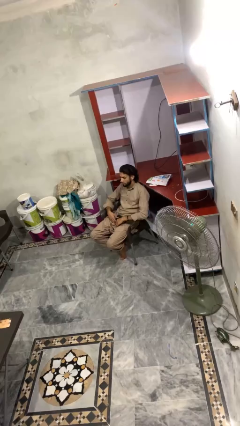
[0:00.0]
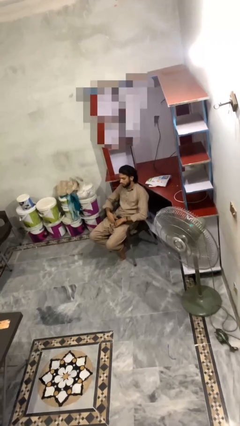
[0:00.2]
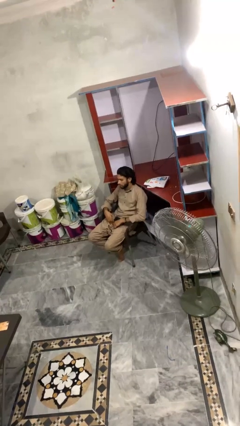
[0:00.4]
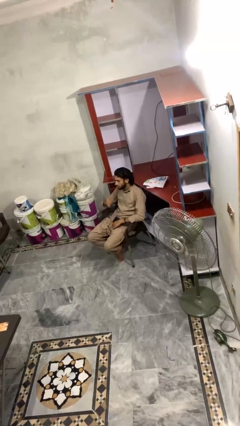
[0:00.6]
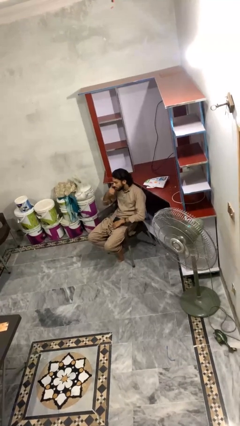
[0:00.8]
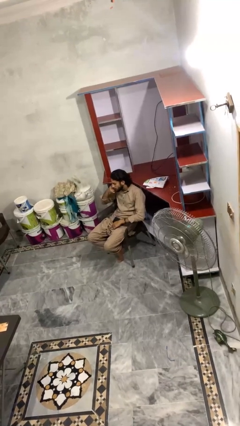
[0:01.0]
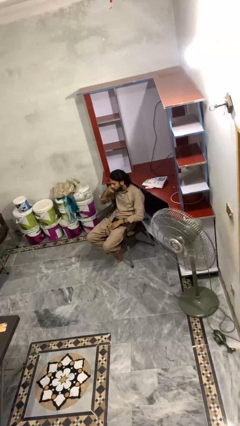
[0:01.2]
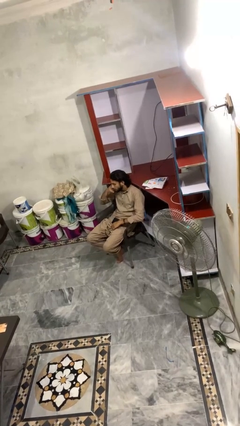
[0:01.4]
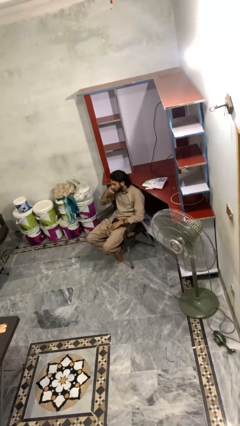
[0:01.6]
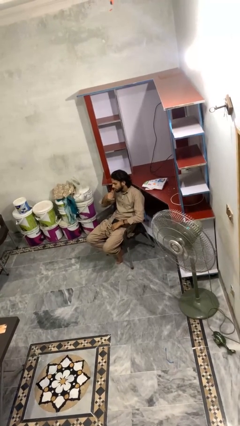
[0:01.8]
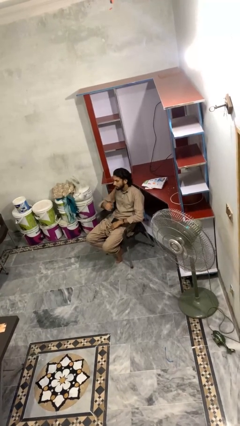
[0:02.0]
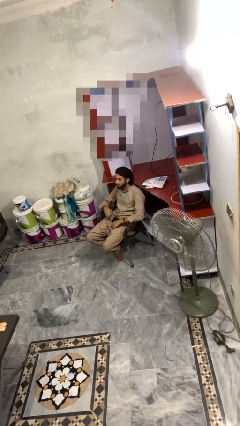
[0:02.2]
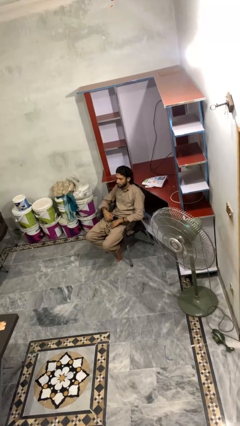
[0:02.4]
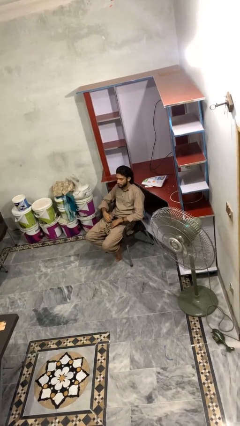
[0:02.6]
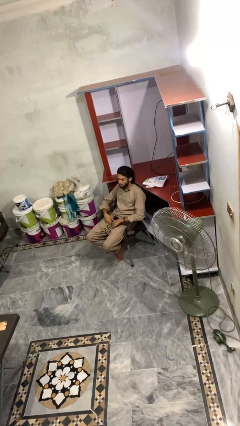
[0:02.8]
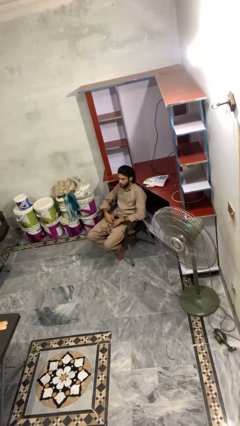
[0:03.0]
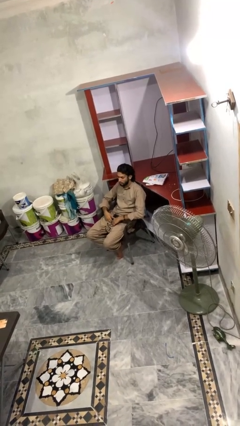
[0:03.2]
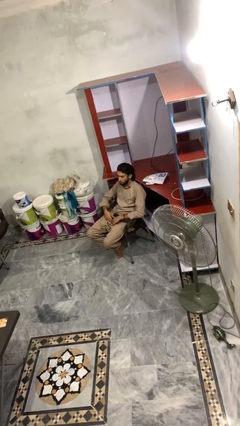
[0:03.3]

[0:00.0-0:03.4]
person gestures call me

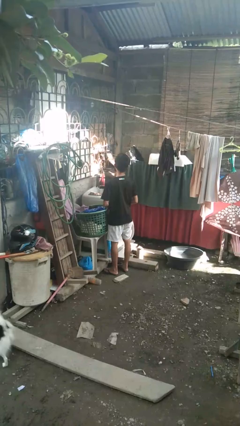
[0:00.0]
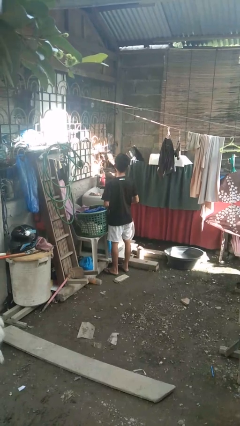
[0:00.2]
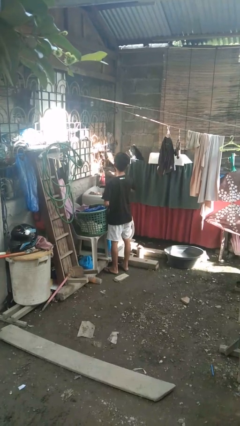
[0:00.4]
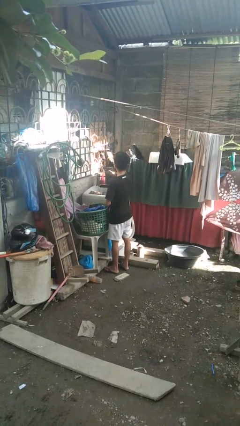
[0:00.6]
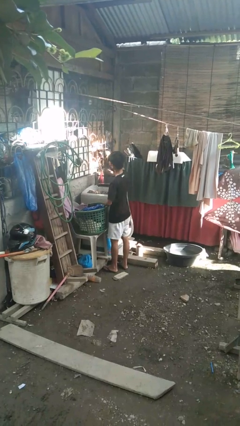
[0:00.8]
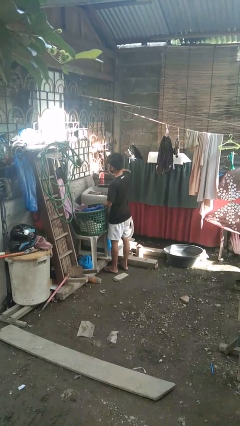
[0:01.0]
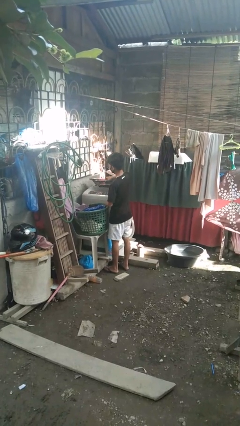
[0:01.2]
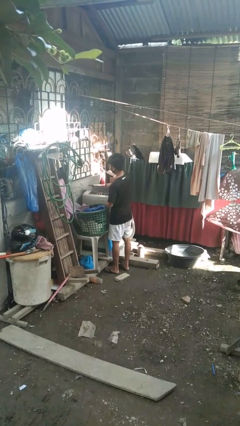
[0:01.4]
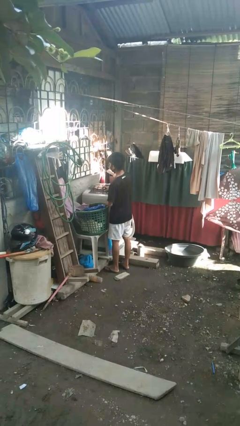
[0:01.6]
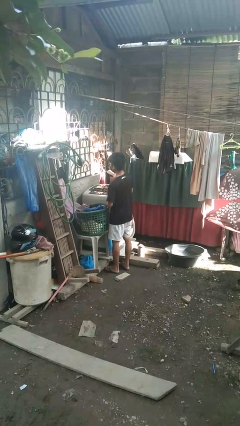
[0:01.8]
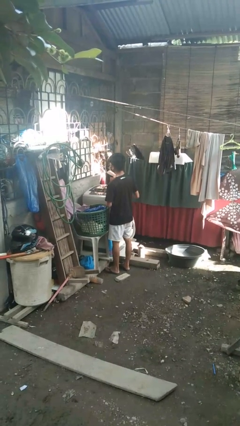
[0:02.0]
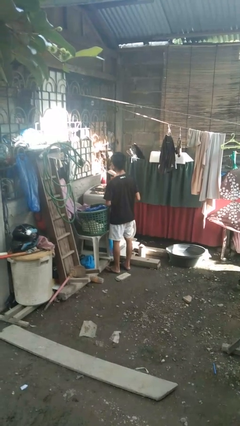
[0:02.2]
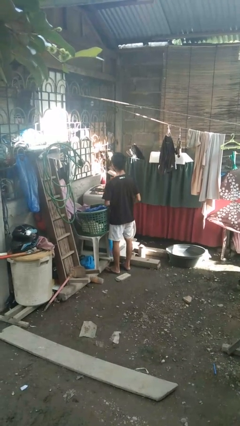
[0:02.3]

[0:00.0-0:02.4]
person closes clothes washer

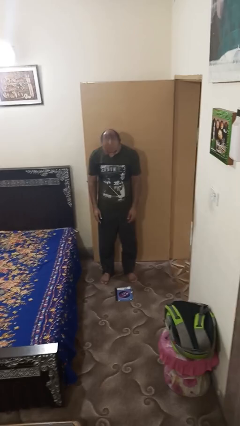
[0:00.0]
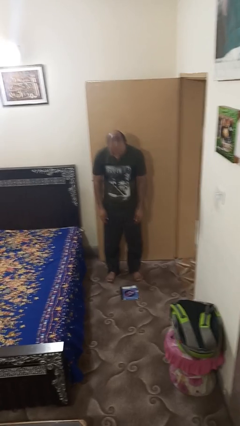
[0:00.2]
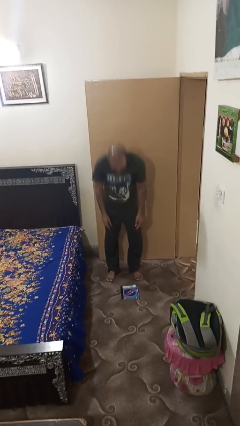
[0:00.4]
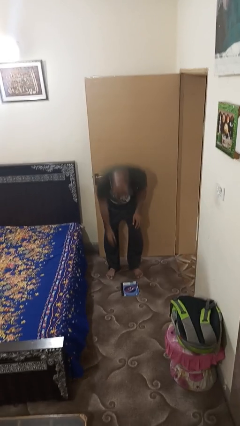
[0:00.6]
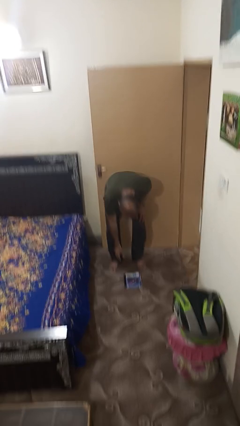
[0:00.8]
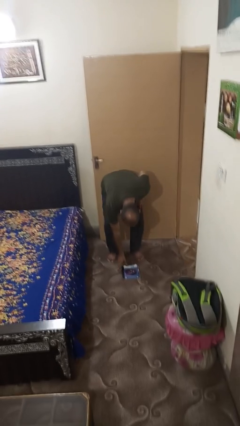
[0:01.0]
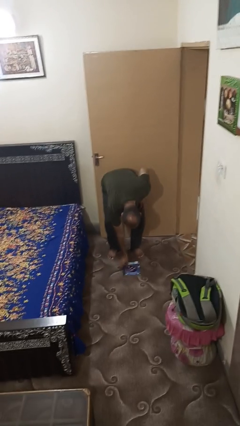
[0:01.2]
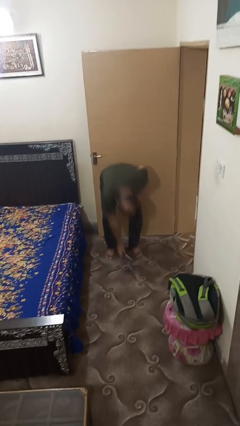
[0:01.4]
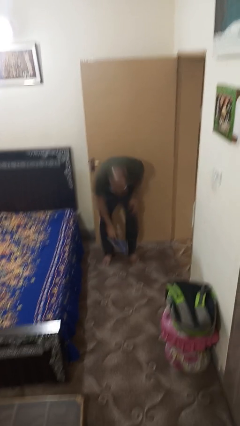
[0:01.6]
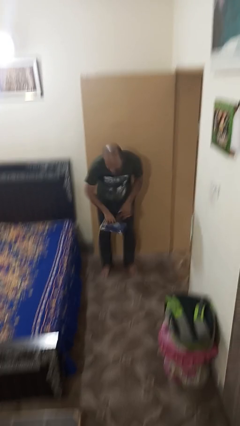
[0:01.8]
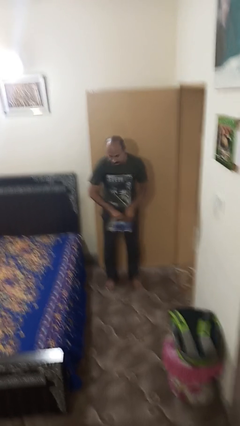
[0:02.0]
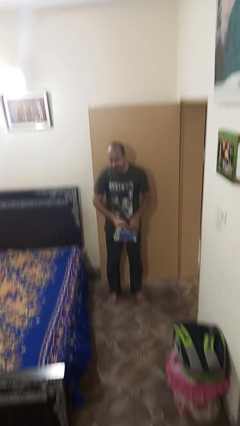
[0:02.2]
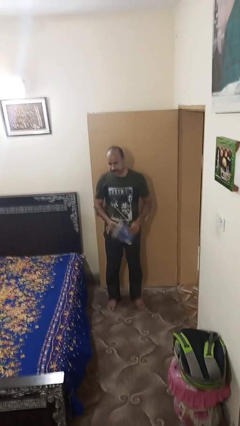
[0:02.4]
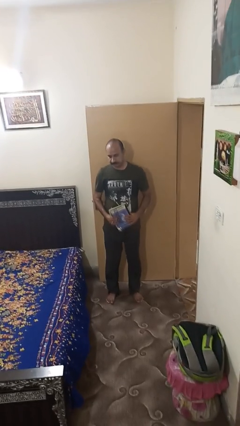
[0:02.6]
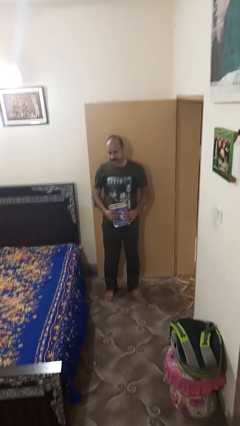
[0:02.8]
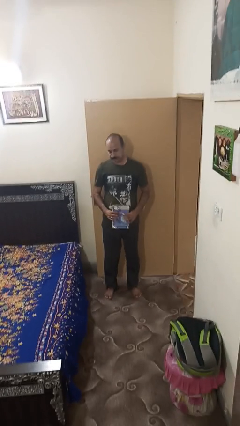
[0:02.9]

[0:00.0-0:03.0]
person picks up object from floor

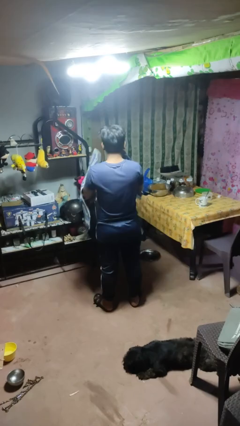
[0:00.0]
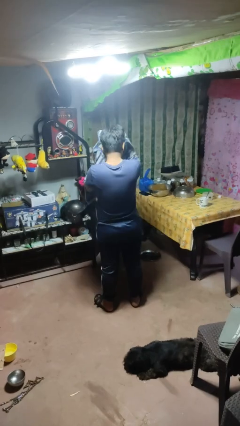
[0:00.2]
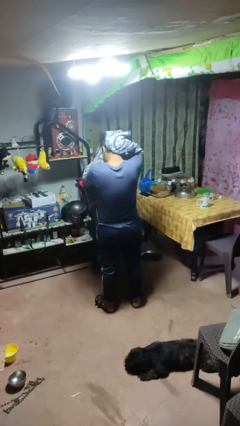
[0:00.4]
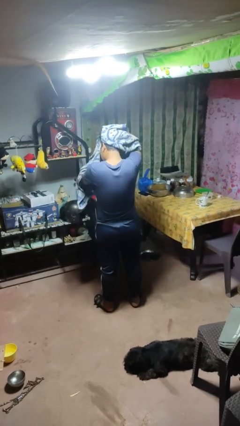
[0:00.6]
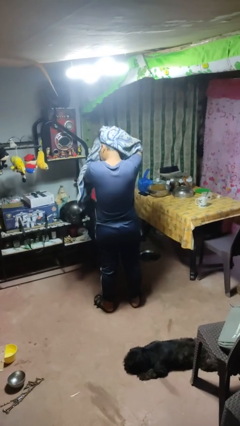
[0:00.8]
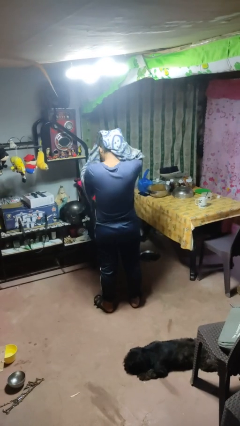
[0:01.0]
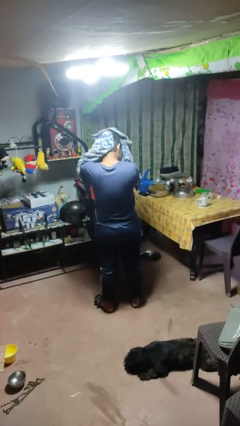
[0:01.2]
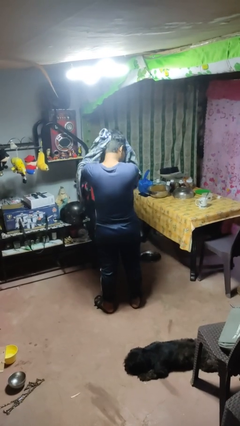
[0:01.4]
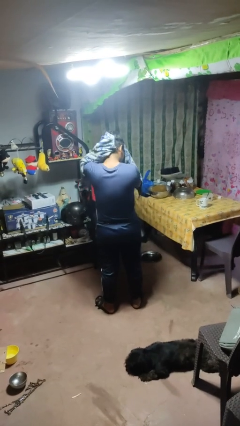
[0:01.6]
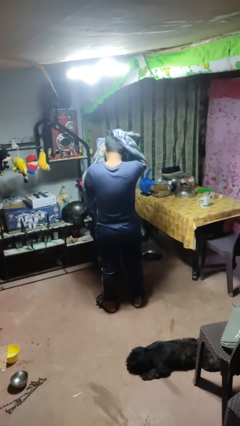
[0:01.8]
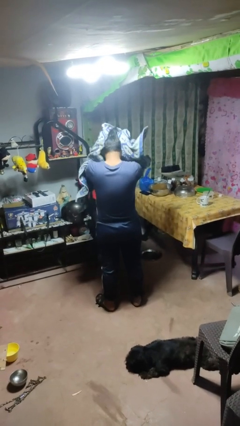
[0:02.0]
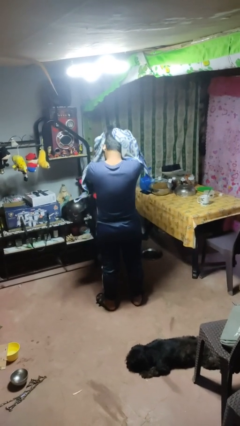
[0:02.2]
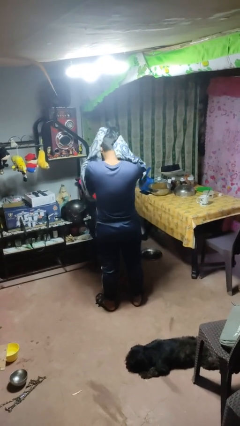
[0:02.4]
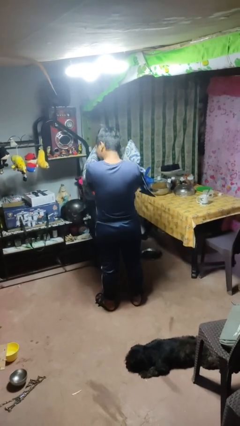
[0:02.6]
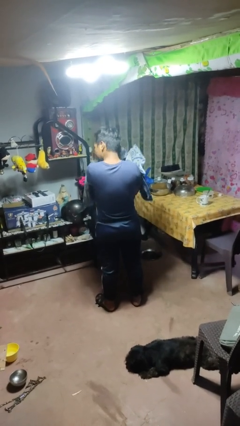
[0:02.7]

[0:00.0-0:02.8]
person dries hair with towel

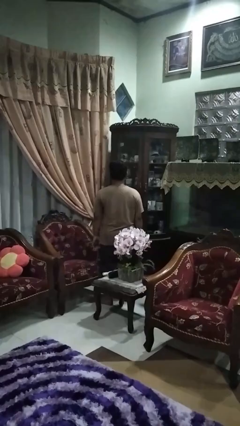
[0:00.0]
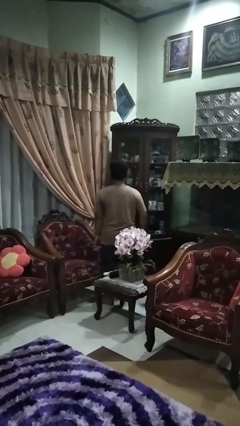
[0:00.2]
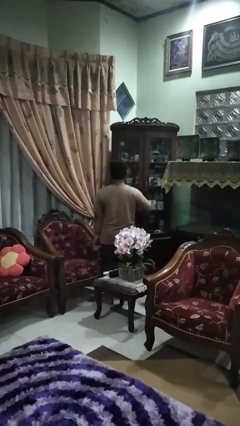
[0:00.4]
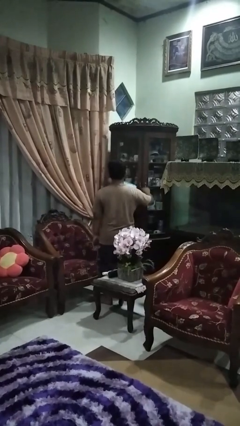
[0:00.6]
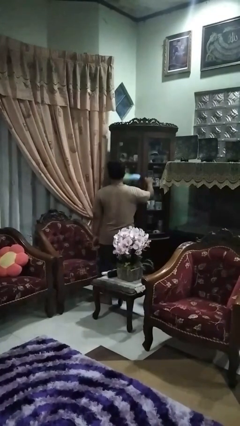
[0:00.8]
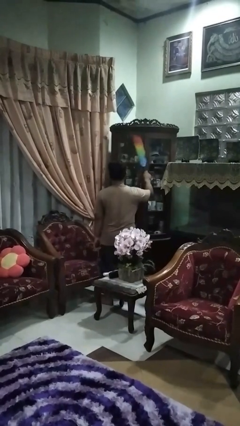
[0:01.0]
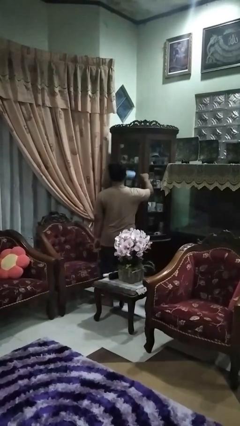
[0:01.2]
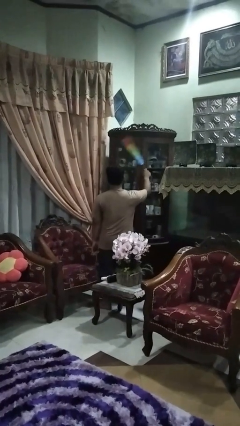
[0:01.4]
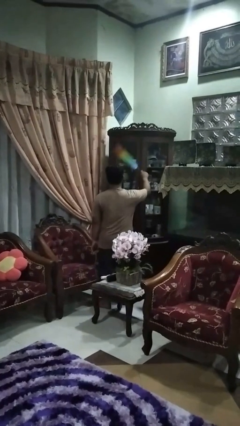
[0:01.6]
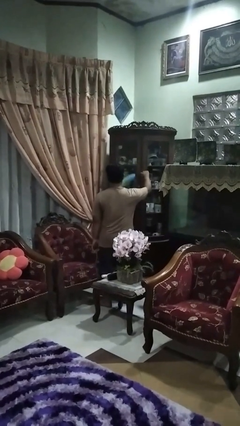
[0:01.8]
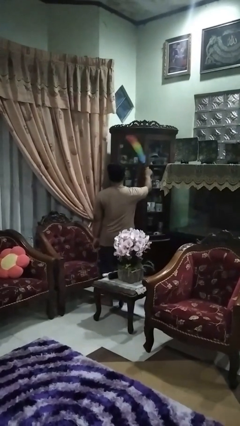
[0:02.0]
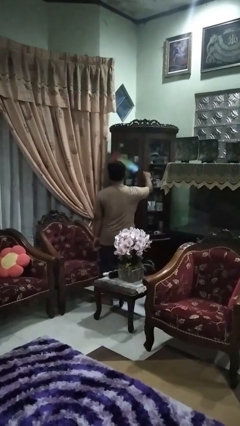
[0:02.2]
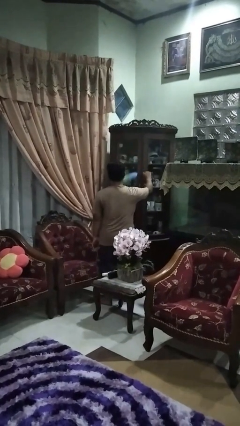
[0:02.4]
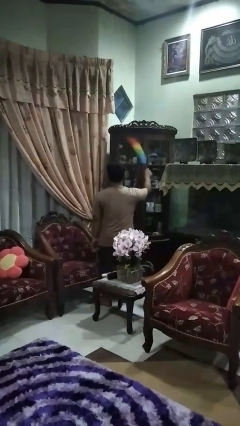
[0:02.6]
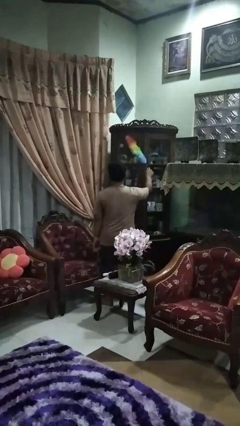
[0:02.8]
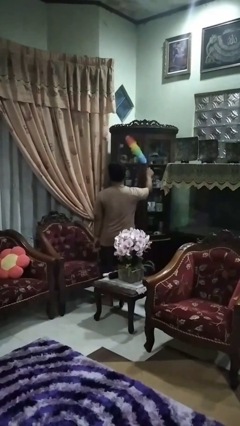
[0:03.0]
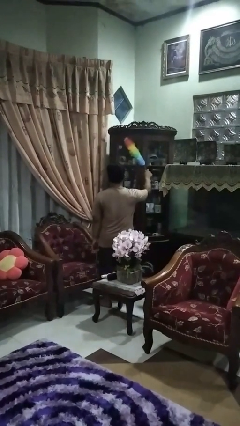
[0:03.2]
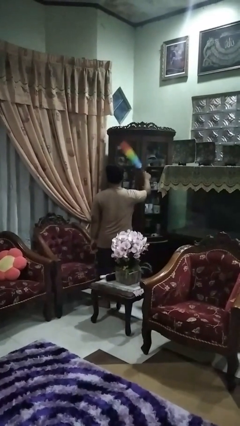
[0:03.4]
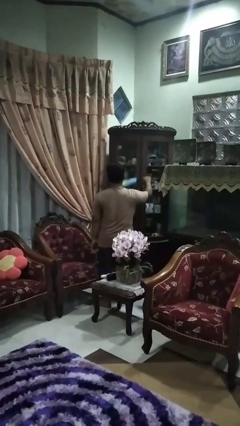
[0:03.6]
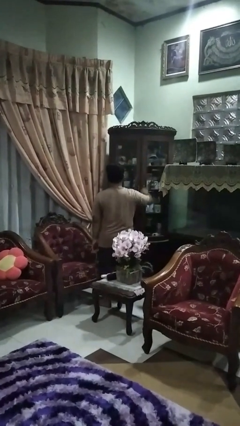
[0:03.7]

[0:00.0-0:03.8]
person dusts furniture

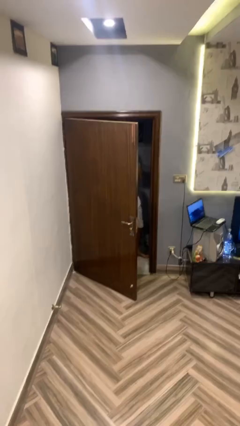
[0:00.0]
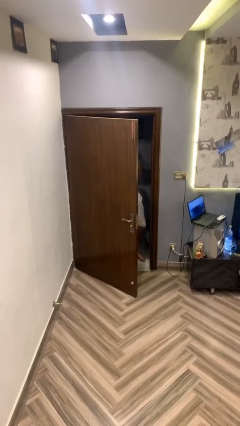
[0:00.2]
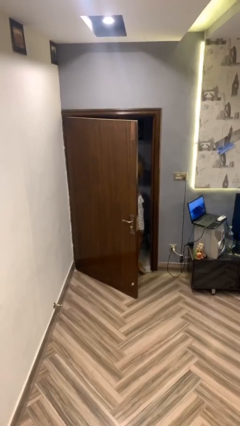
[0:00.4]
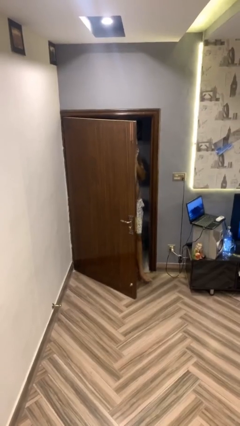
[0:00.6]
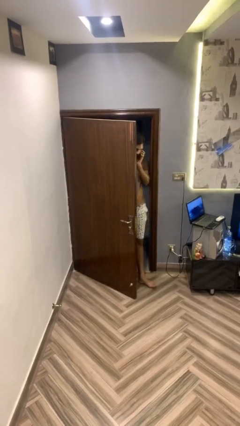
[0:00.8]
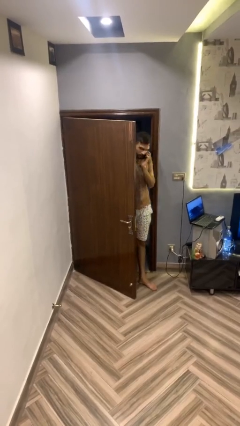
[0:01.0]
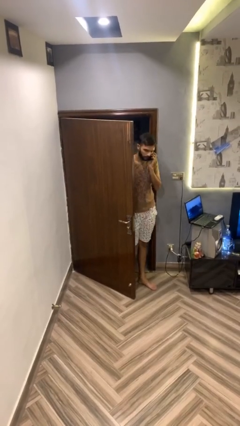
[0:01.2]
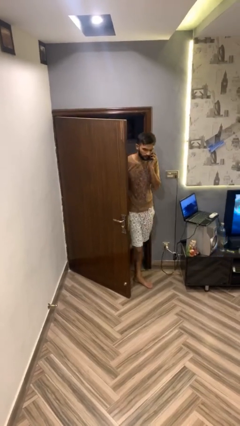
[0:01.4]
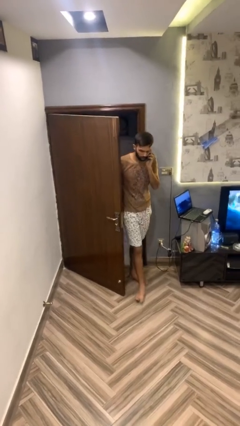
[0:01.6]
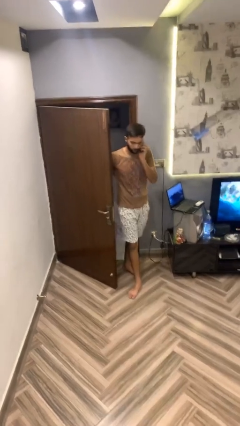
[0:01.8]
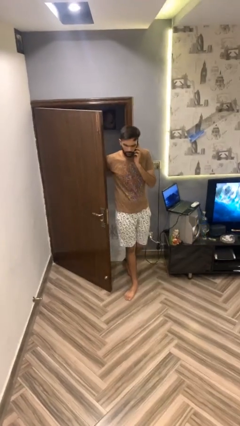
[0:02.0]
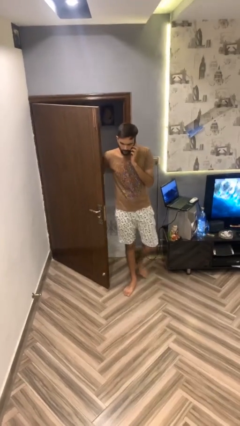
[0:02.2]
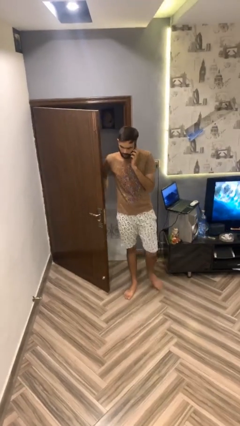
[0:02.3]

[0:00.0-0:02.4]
person enters scene through structure

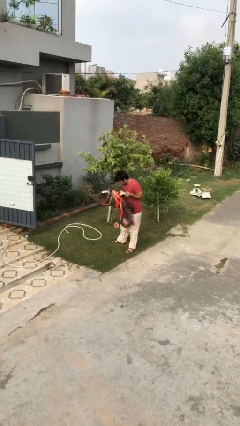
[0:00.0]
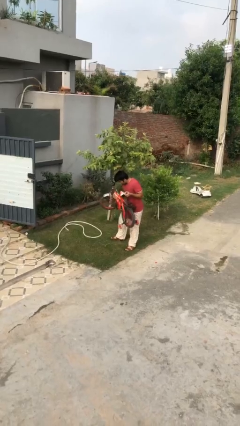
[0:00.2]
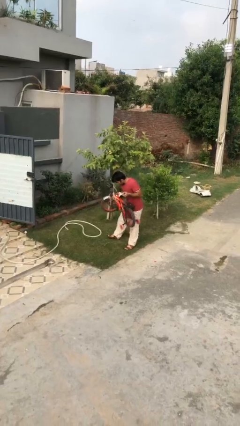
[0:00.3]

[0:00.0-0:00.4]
person puts down object on floor
